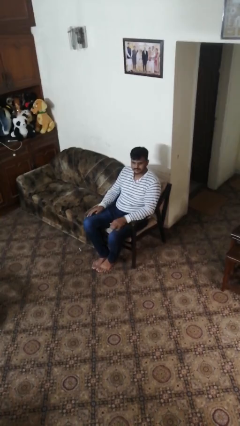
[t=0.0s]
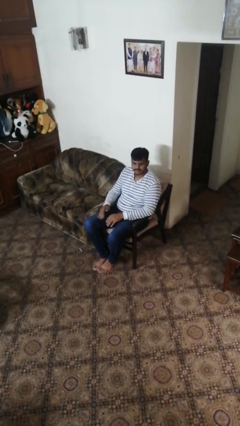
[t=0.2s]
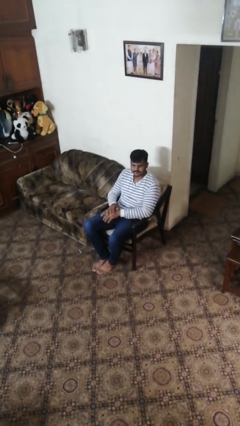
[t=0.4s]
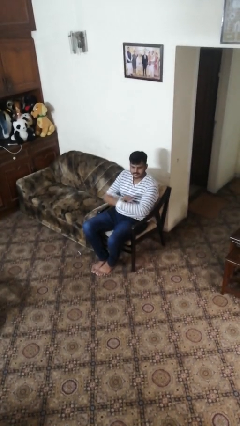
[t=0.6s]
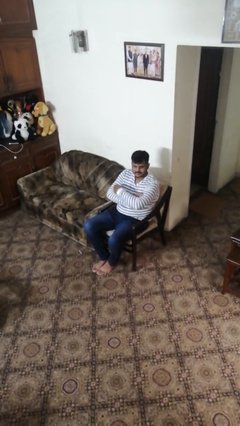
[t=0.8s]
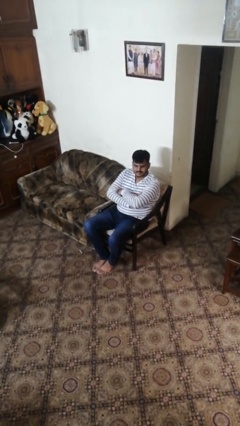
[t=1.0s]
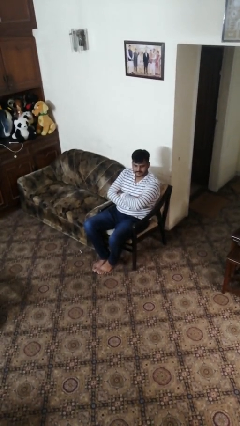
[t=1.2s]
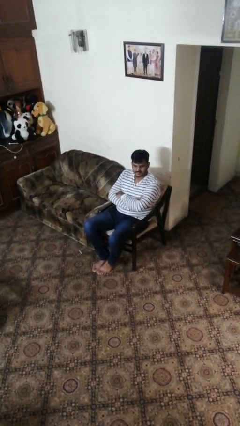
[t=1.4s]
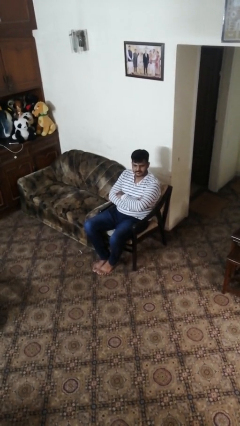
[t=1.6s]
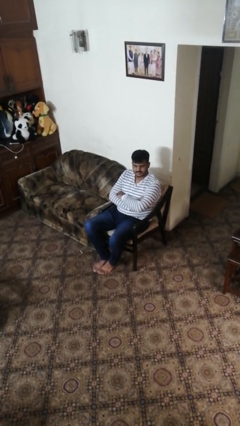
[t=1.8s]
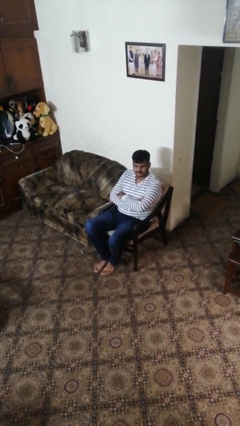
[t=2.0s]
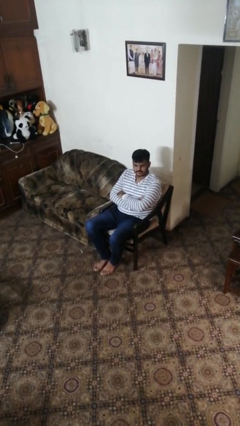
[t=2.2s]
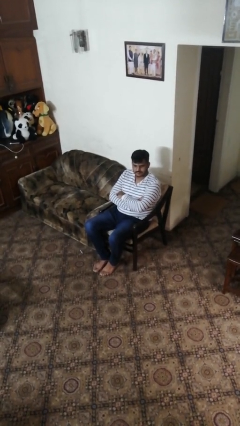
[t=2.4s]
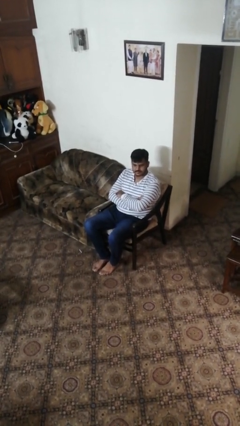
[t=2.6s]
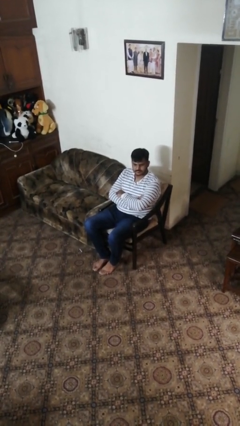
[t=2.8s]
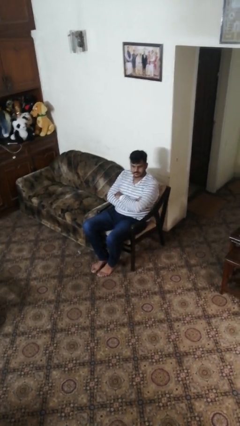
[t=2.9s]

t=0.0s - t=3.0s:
person crosses arms

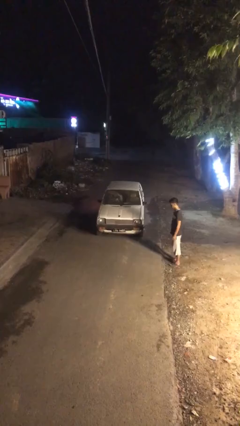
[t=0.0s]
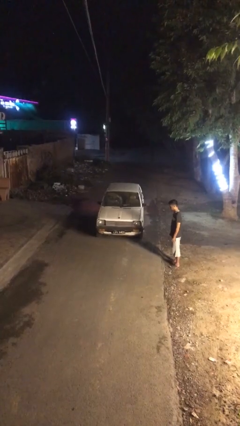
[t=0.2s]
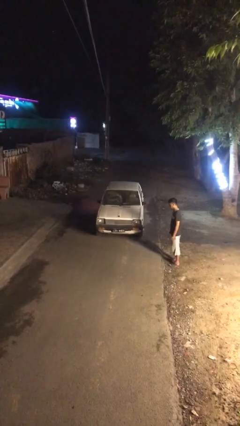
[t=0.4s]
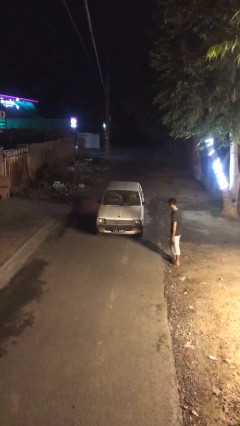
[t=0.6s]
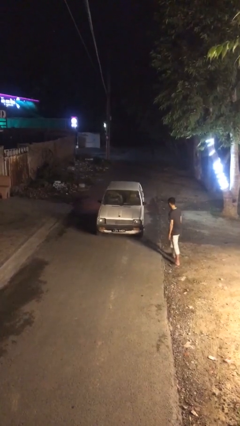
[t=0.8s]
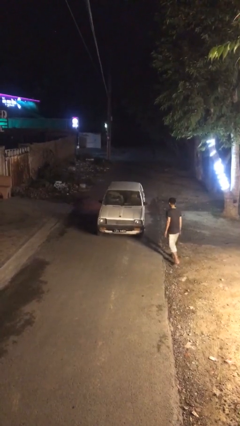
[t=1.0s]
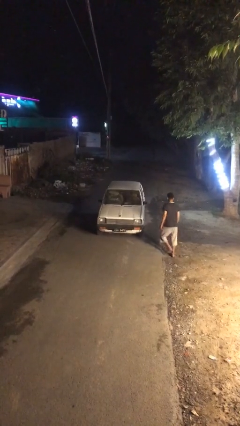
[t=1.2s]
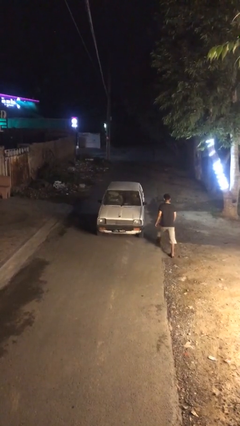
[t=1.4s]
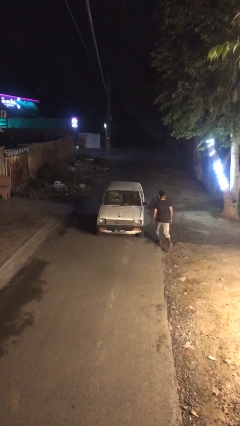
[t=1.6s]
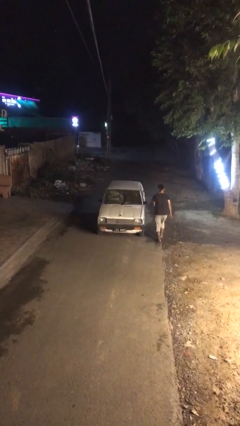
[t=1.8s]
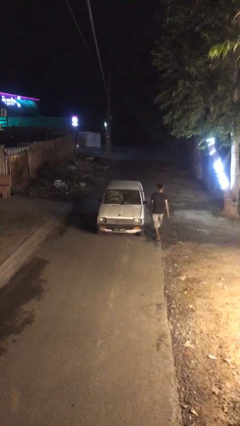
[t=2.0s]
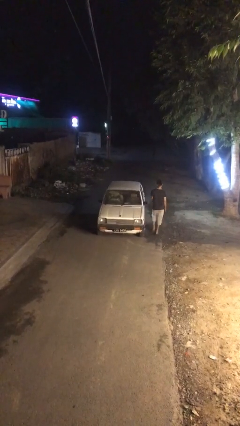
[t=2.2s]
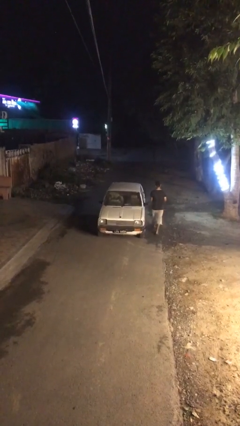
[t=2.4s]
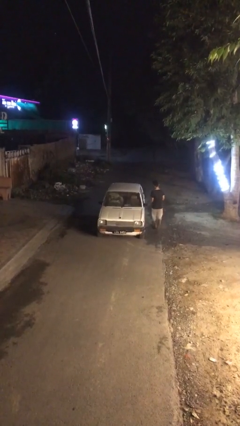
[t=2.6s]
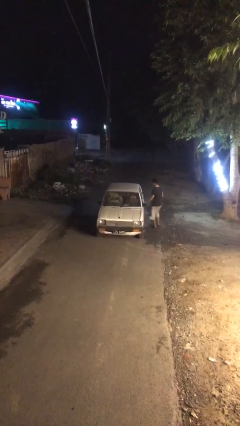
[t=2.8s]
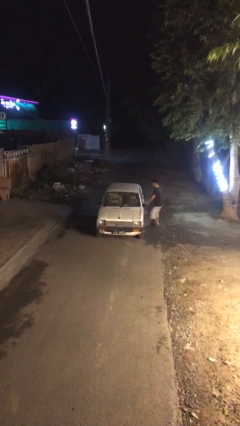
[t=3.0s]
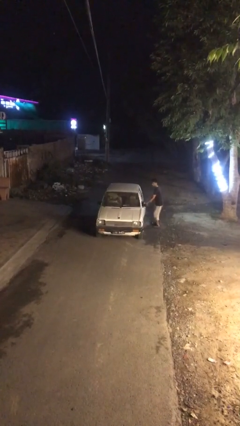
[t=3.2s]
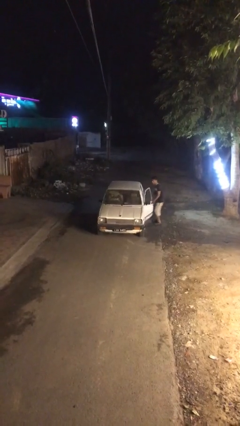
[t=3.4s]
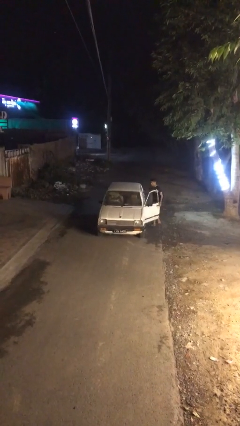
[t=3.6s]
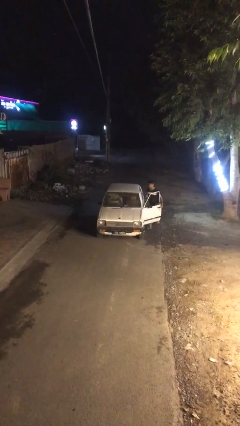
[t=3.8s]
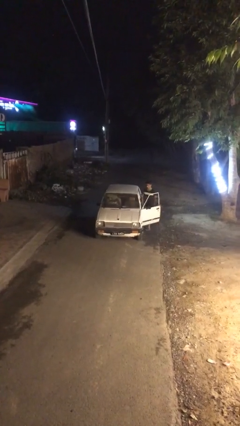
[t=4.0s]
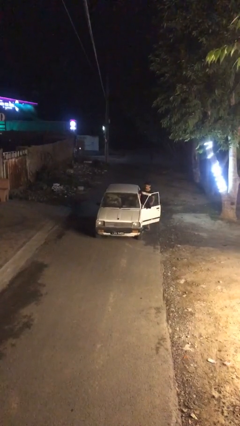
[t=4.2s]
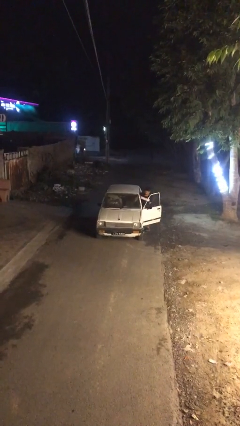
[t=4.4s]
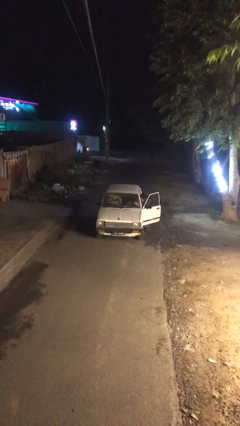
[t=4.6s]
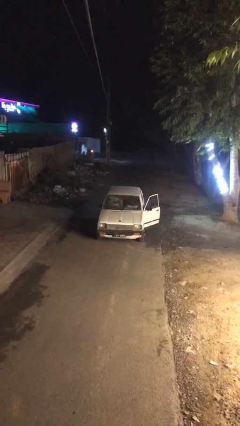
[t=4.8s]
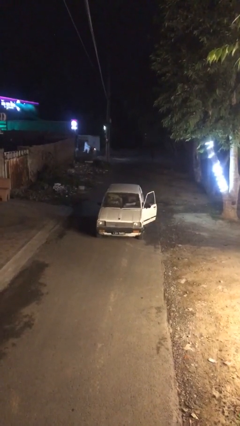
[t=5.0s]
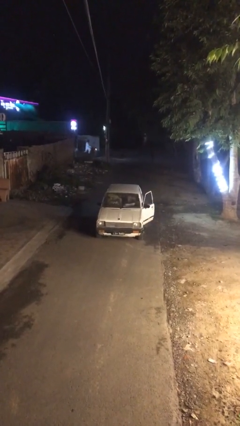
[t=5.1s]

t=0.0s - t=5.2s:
car picks up person

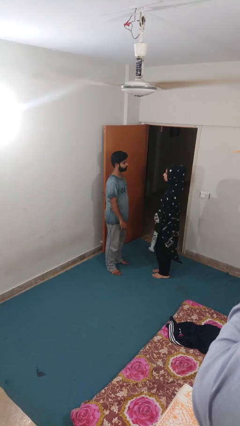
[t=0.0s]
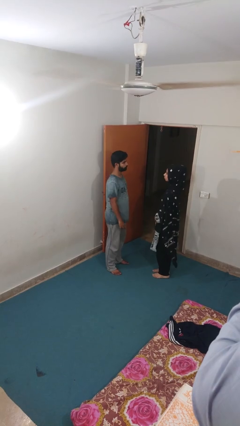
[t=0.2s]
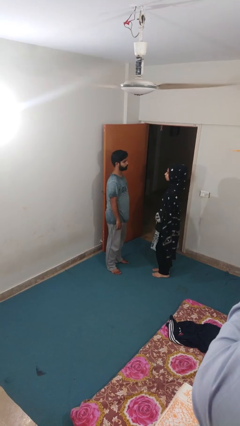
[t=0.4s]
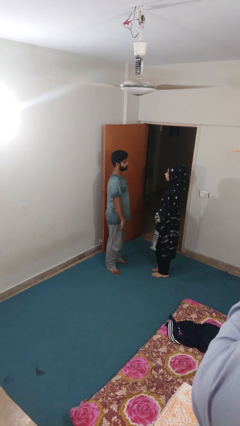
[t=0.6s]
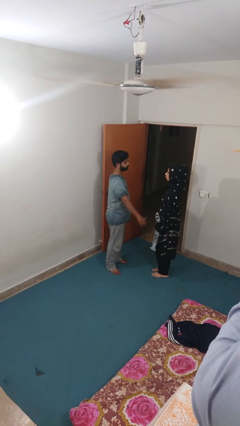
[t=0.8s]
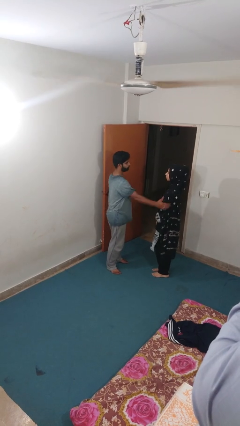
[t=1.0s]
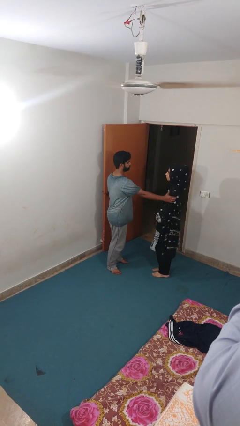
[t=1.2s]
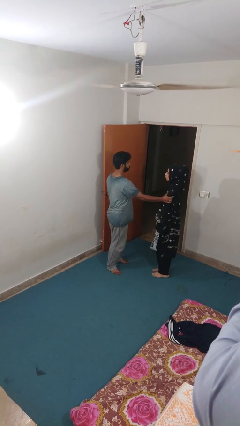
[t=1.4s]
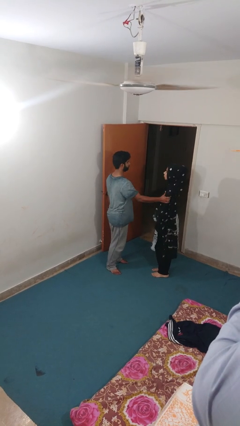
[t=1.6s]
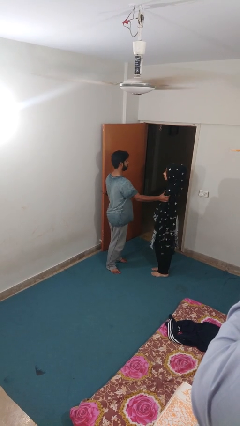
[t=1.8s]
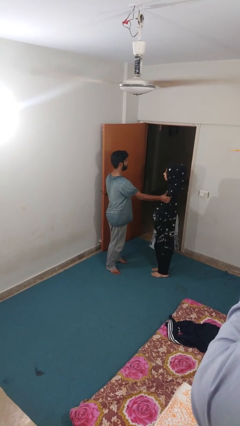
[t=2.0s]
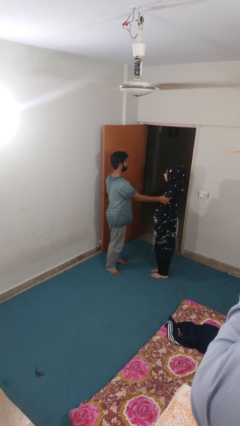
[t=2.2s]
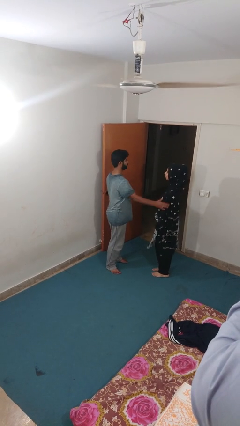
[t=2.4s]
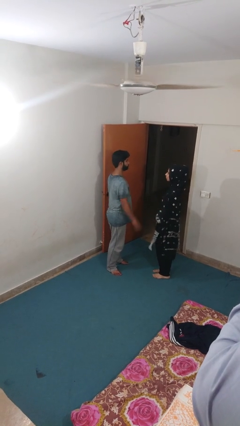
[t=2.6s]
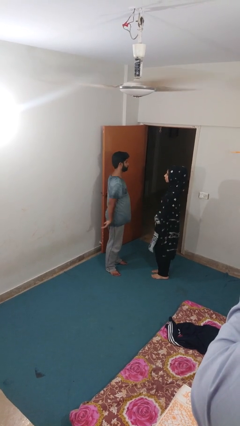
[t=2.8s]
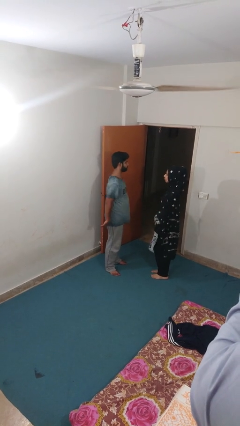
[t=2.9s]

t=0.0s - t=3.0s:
person grabs person by bicep

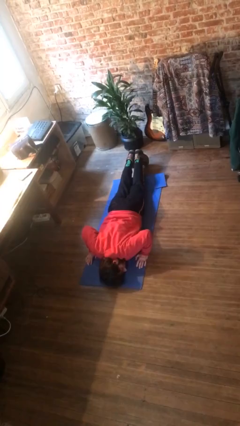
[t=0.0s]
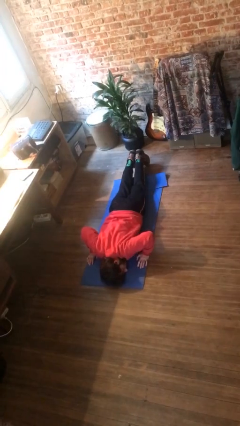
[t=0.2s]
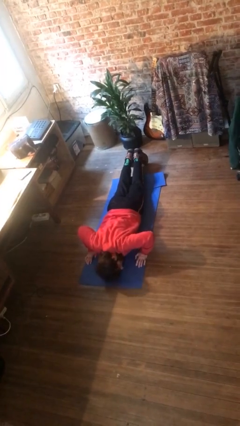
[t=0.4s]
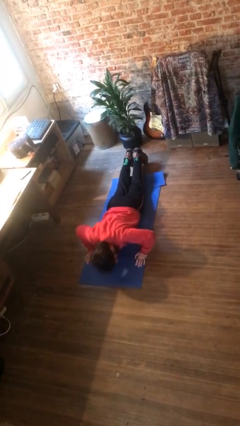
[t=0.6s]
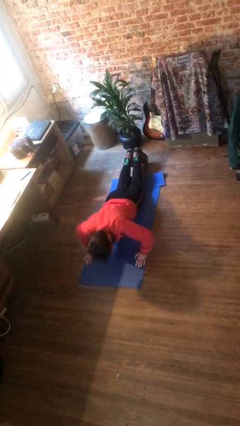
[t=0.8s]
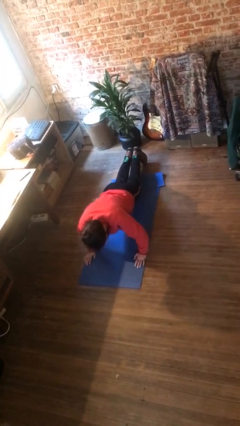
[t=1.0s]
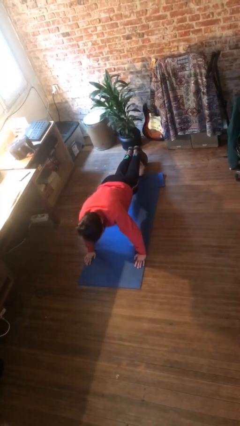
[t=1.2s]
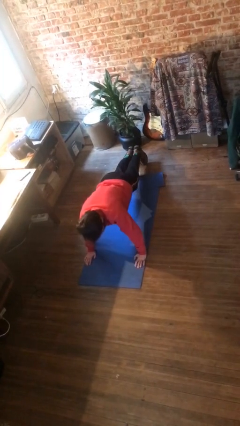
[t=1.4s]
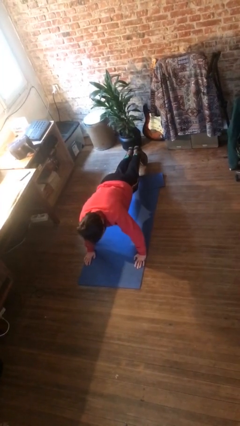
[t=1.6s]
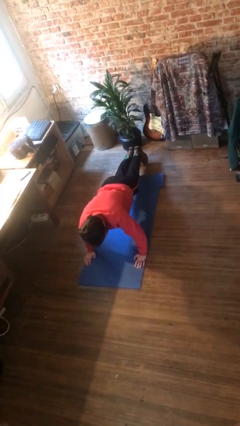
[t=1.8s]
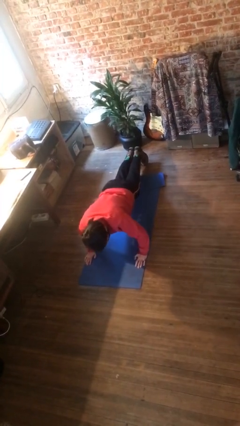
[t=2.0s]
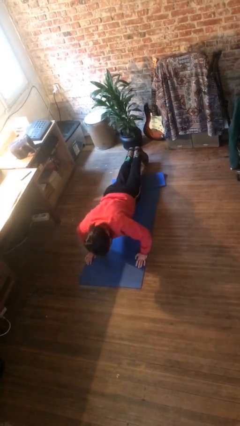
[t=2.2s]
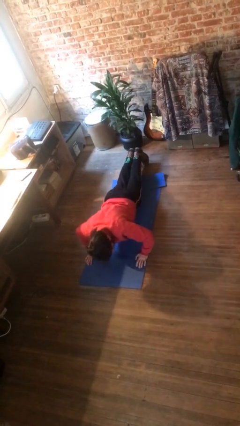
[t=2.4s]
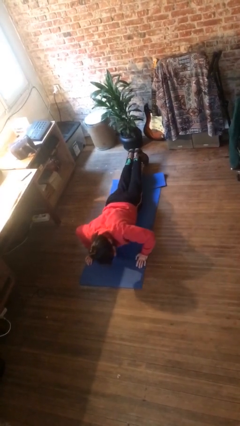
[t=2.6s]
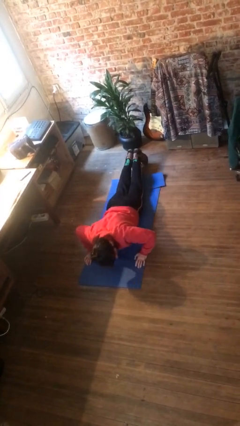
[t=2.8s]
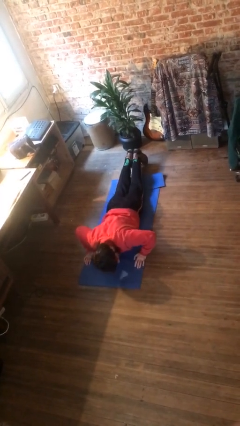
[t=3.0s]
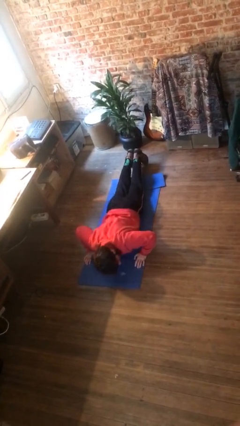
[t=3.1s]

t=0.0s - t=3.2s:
person exercises with pushup

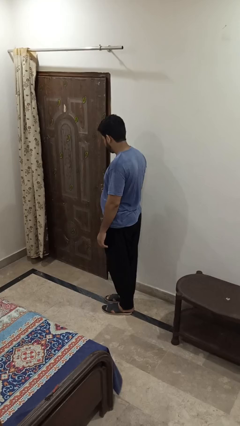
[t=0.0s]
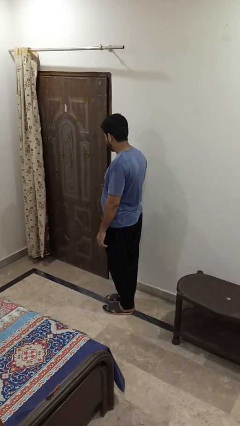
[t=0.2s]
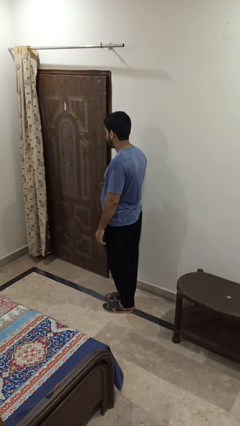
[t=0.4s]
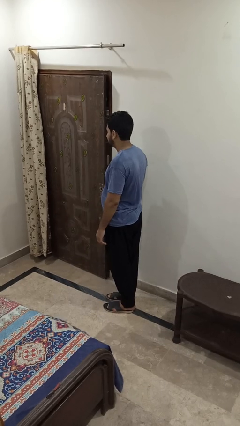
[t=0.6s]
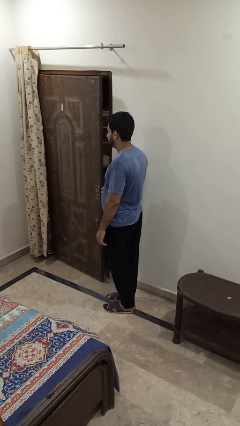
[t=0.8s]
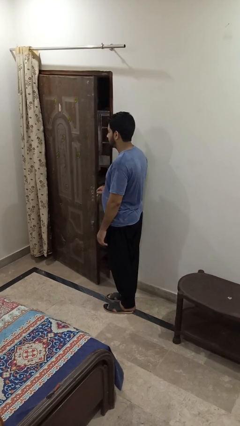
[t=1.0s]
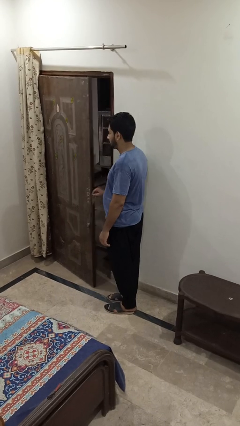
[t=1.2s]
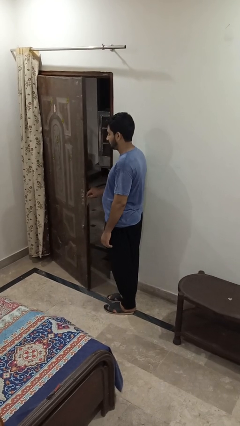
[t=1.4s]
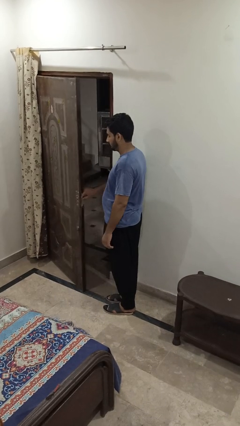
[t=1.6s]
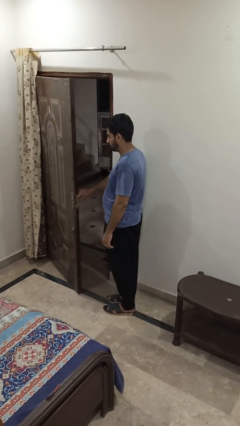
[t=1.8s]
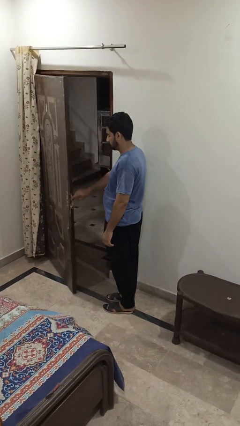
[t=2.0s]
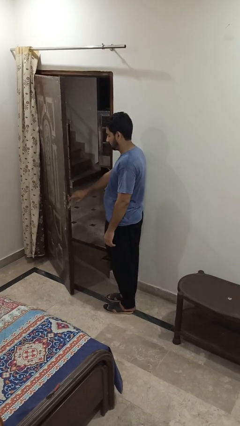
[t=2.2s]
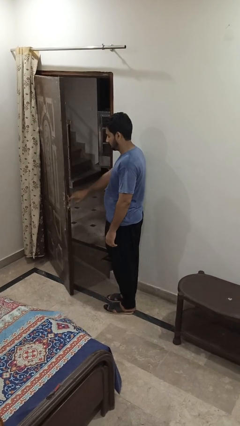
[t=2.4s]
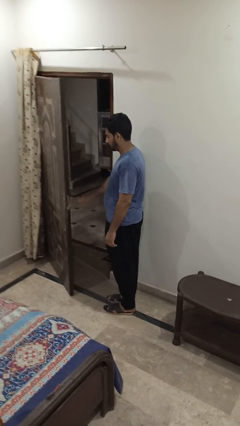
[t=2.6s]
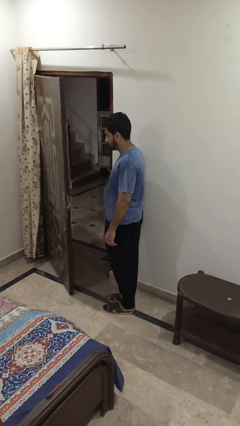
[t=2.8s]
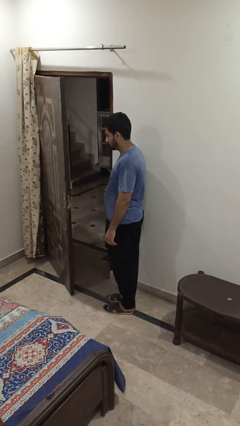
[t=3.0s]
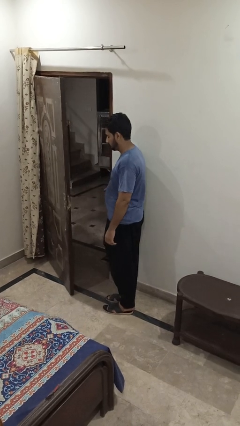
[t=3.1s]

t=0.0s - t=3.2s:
person opens facility door
